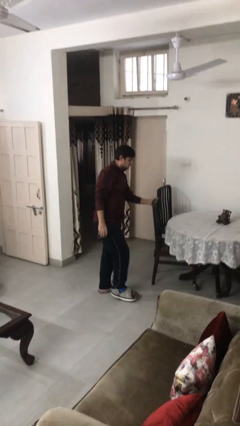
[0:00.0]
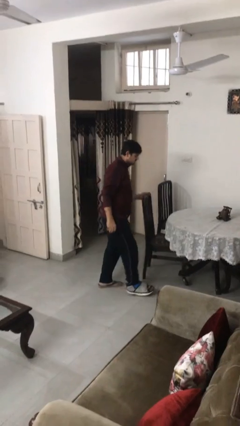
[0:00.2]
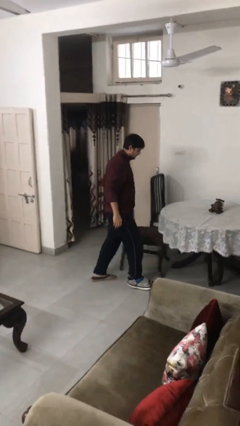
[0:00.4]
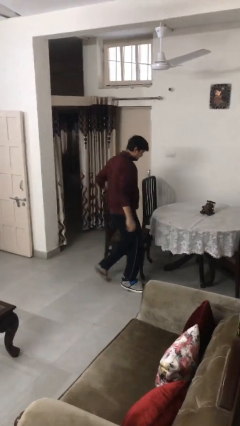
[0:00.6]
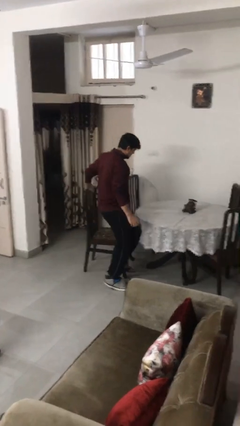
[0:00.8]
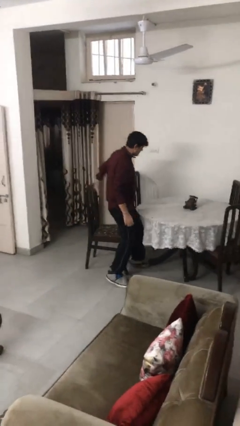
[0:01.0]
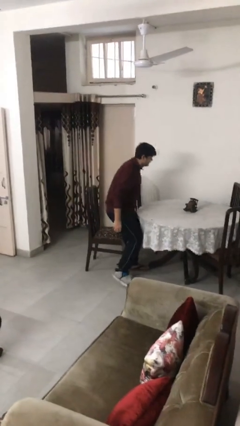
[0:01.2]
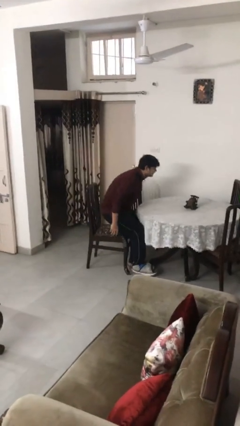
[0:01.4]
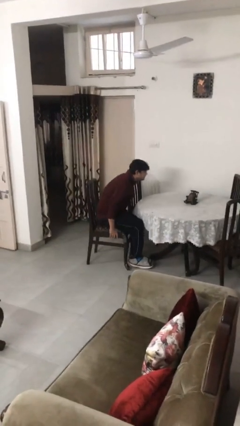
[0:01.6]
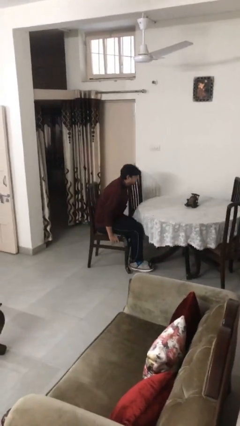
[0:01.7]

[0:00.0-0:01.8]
person sits down

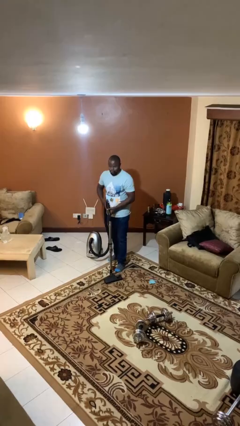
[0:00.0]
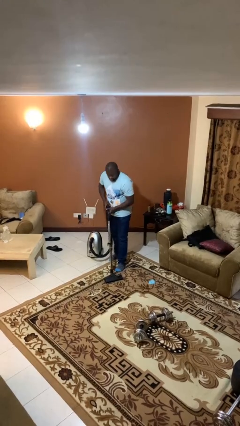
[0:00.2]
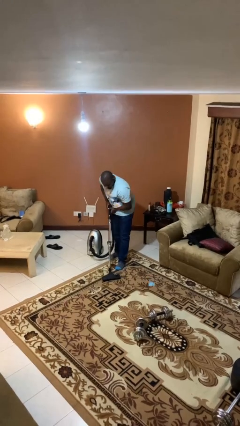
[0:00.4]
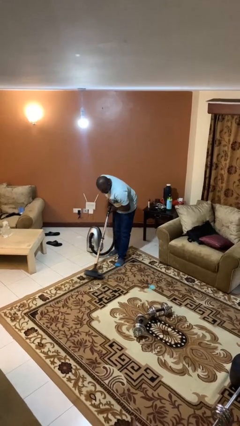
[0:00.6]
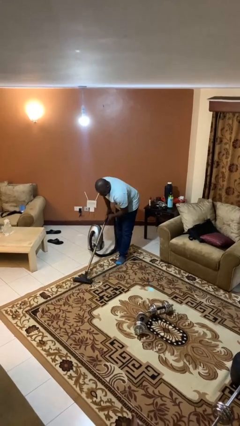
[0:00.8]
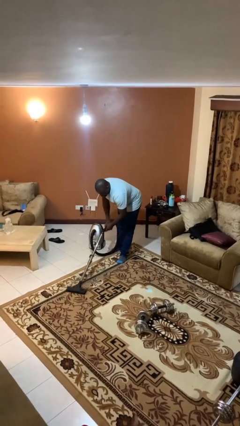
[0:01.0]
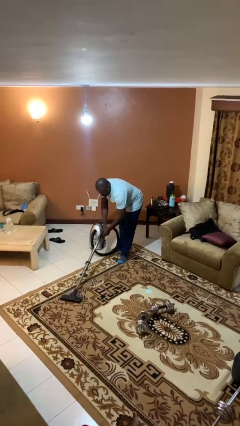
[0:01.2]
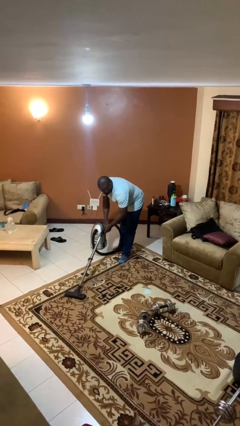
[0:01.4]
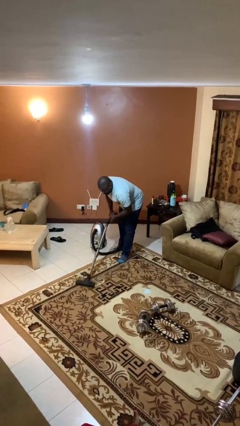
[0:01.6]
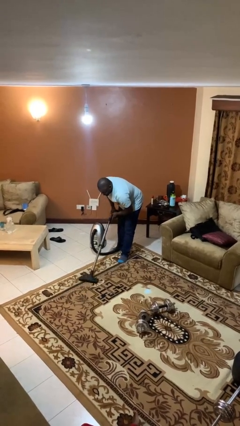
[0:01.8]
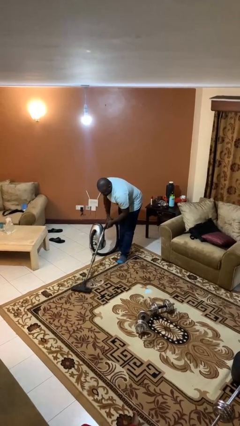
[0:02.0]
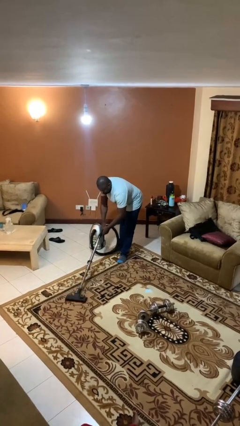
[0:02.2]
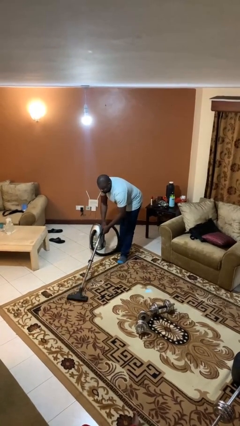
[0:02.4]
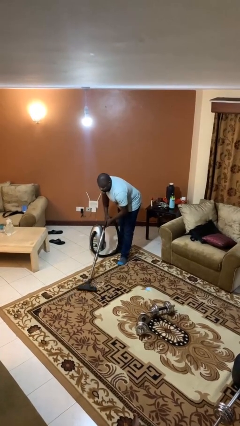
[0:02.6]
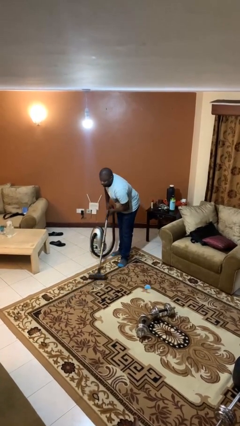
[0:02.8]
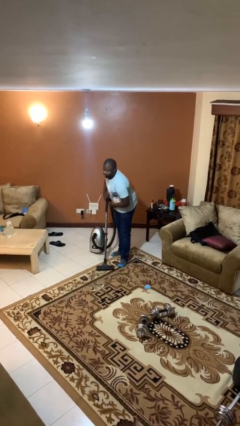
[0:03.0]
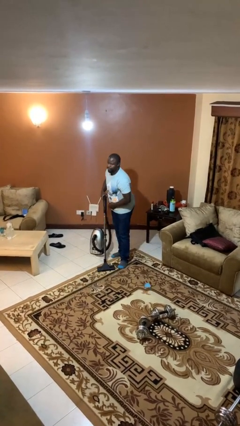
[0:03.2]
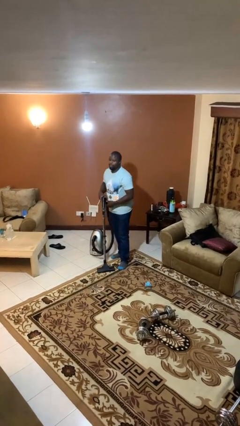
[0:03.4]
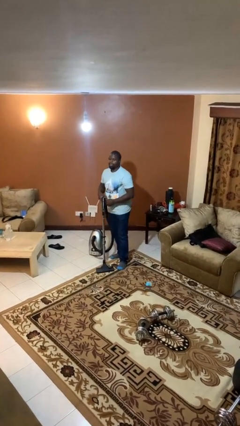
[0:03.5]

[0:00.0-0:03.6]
person vacuums carpet

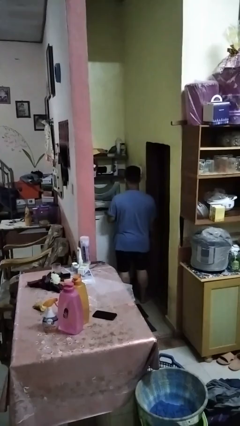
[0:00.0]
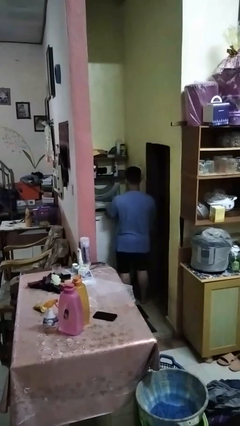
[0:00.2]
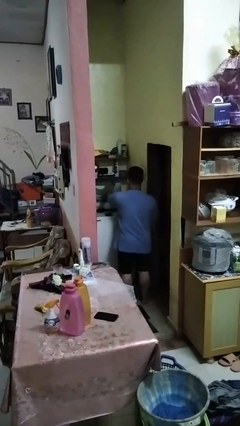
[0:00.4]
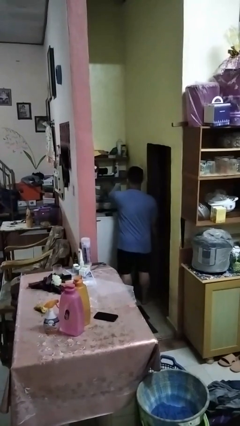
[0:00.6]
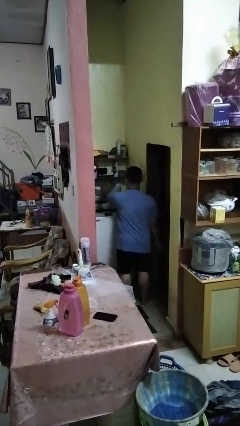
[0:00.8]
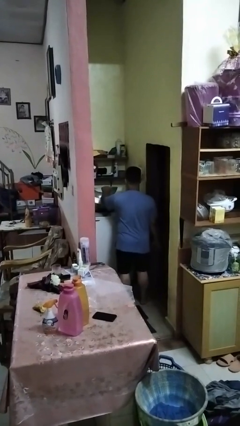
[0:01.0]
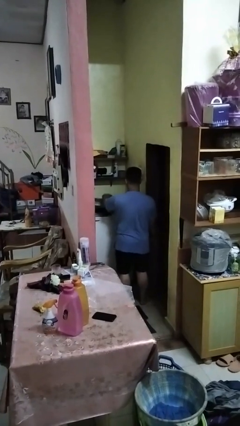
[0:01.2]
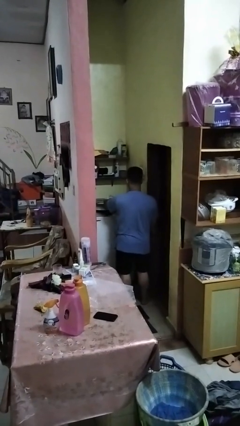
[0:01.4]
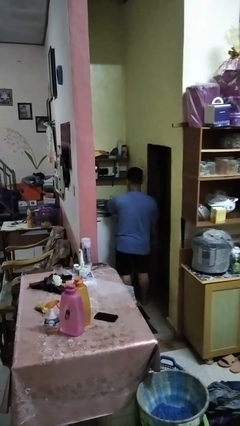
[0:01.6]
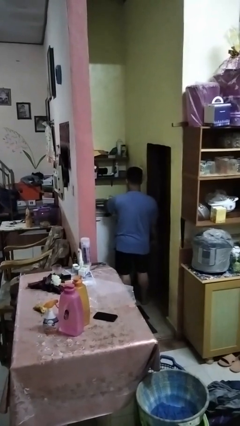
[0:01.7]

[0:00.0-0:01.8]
person closes clothes washer

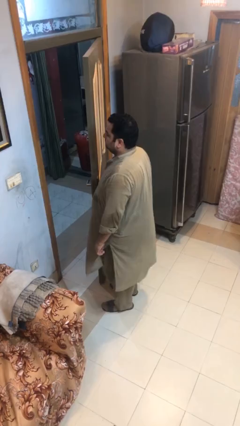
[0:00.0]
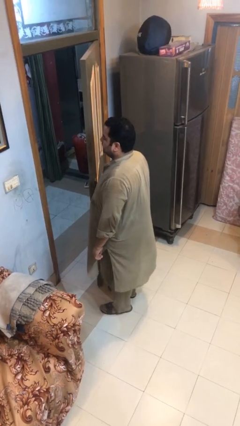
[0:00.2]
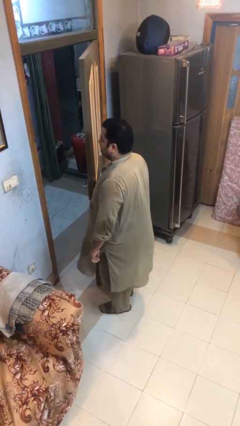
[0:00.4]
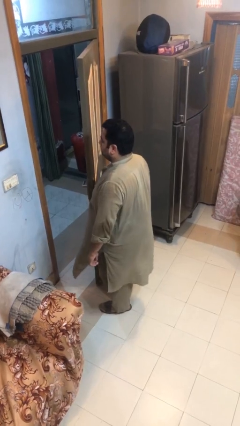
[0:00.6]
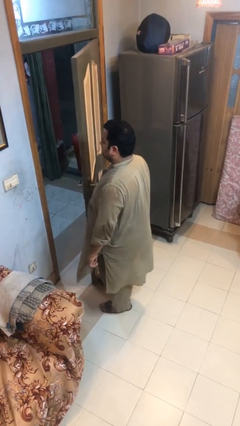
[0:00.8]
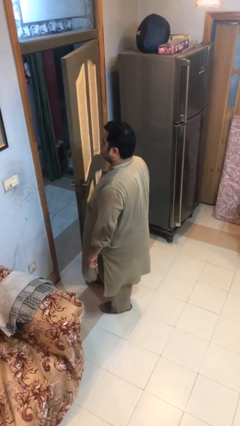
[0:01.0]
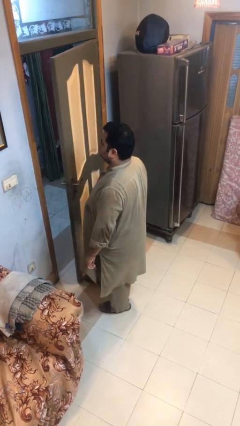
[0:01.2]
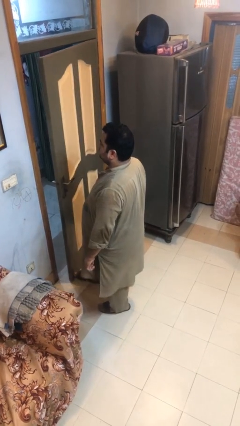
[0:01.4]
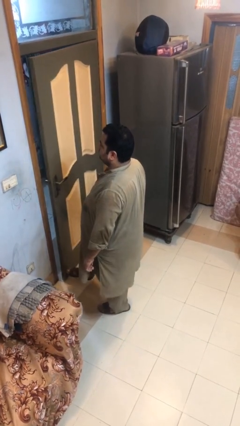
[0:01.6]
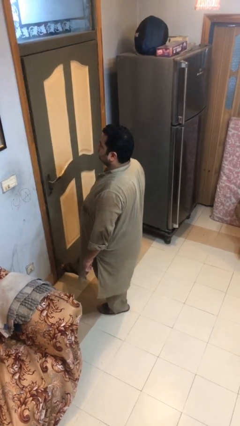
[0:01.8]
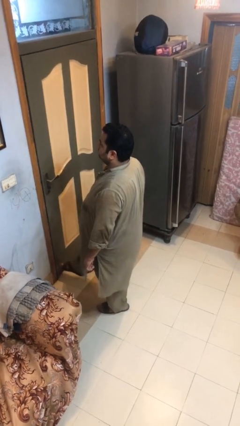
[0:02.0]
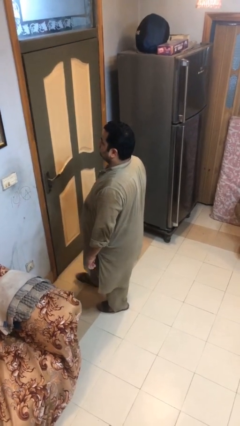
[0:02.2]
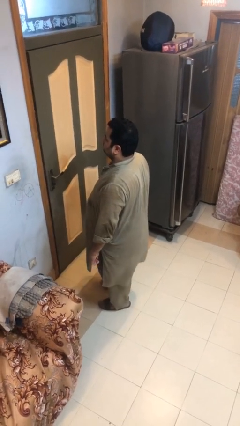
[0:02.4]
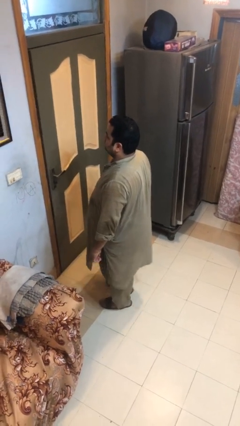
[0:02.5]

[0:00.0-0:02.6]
person closes door with foot

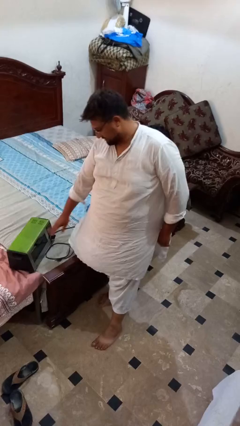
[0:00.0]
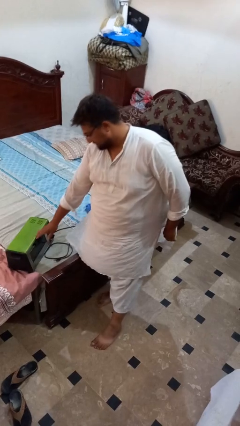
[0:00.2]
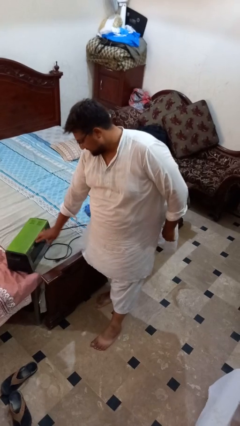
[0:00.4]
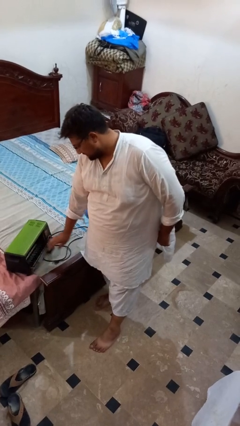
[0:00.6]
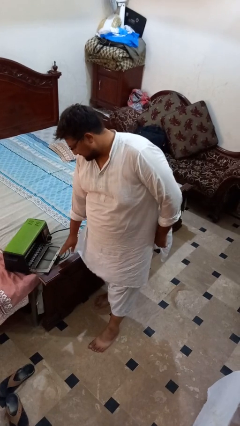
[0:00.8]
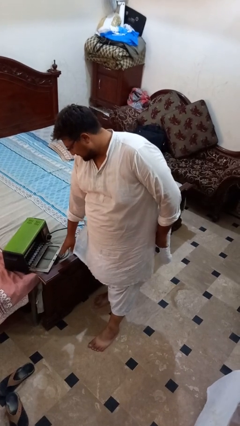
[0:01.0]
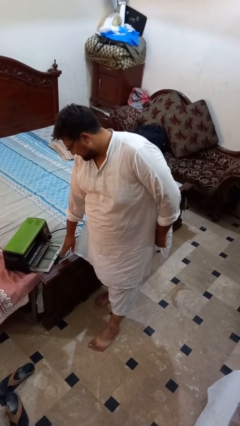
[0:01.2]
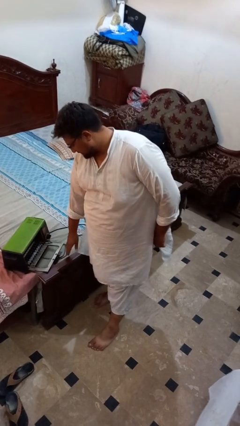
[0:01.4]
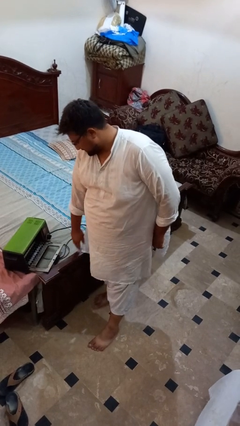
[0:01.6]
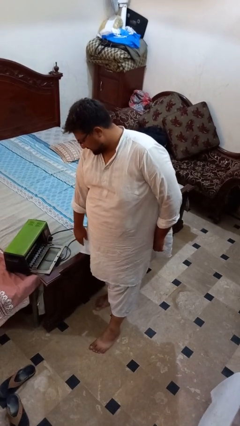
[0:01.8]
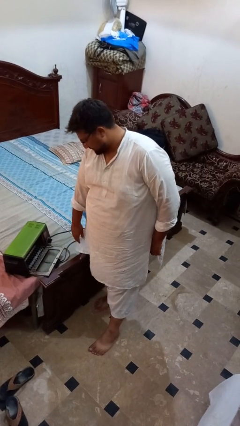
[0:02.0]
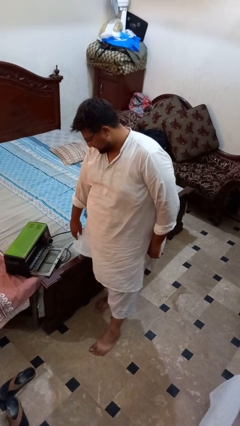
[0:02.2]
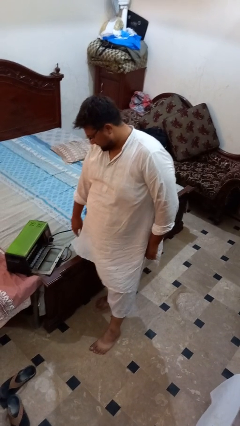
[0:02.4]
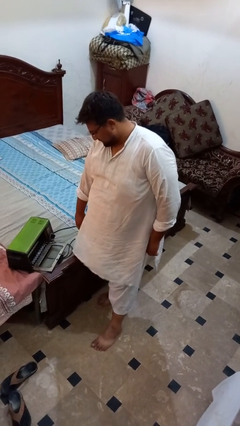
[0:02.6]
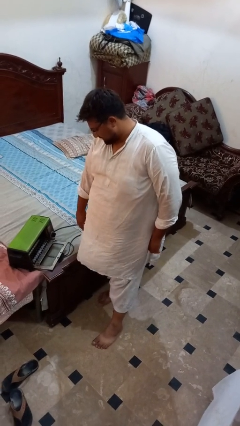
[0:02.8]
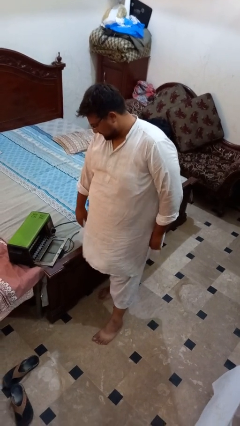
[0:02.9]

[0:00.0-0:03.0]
person opens oven door

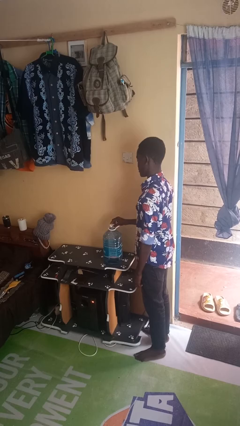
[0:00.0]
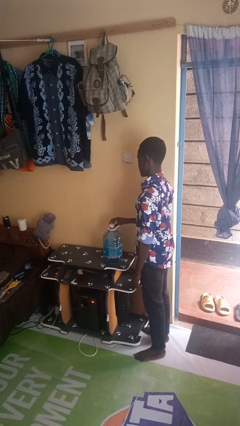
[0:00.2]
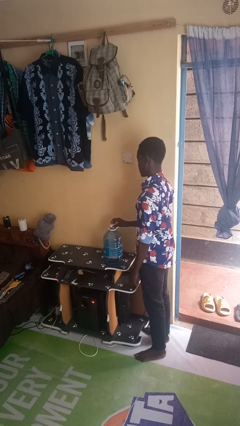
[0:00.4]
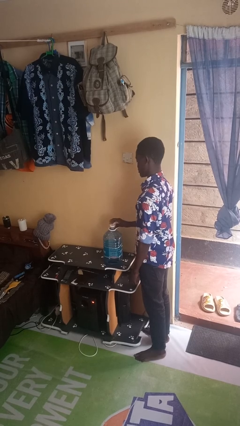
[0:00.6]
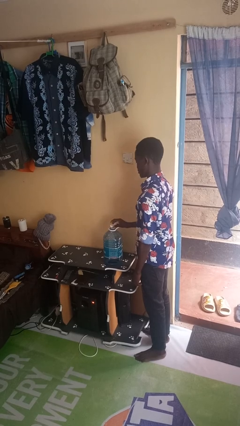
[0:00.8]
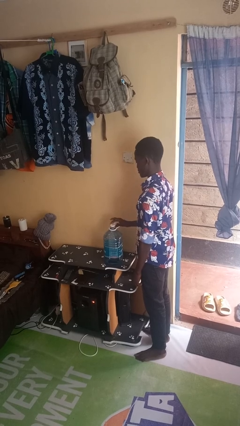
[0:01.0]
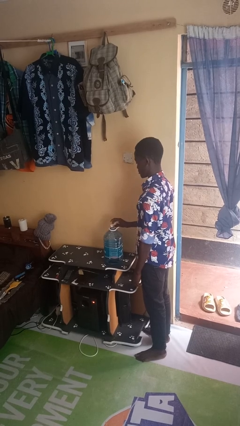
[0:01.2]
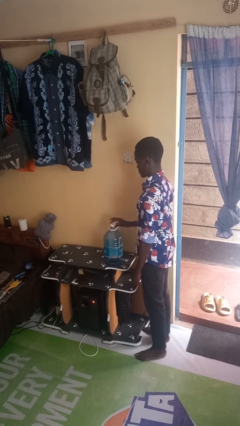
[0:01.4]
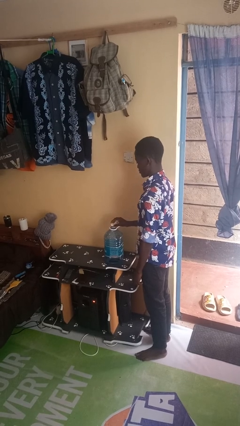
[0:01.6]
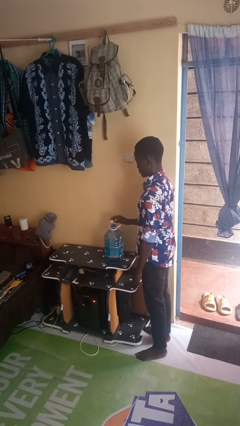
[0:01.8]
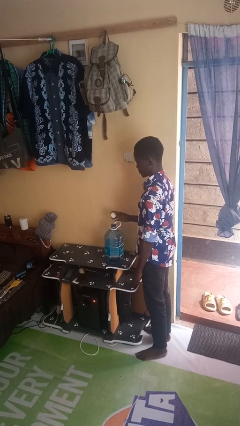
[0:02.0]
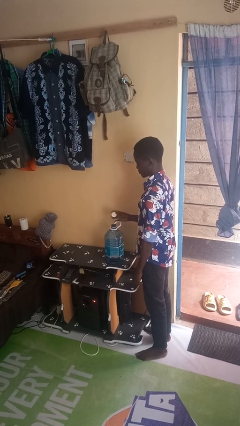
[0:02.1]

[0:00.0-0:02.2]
person unscrews lid from bottle

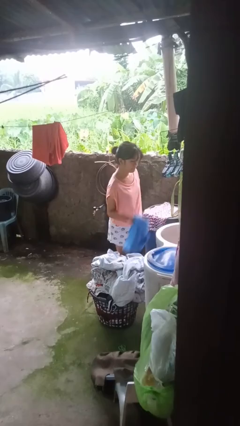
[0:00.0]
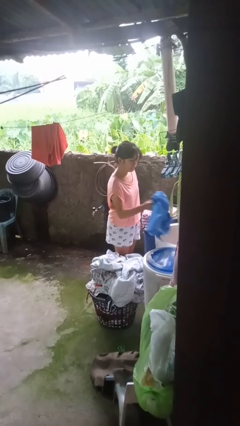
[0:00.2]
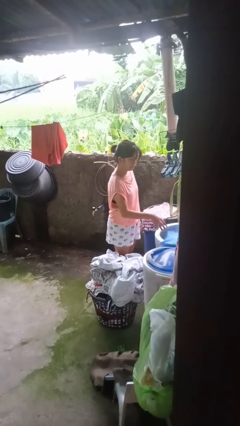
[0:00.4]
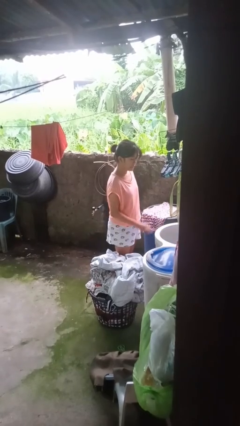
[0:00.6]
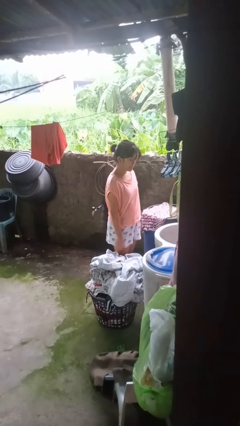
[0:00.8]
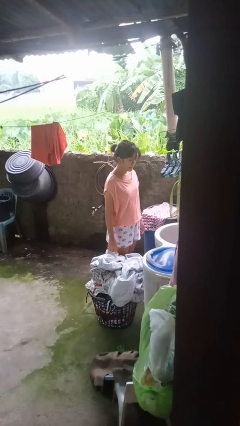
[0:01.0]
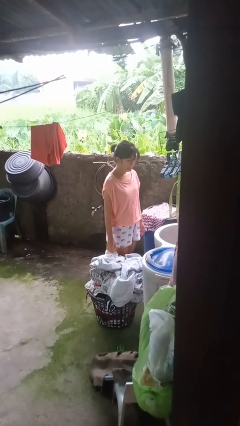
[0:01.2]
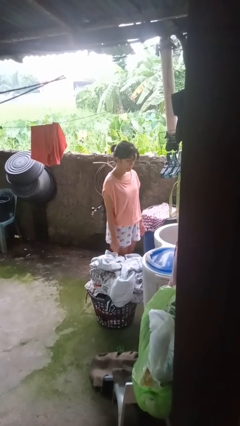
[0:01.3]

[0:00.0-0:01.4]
person loads clotheswasher

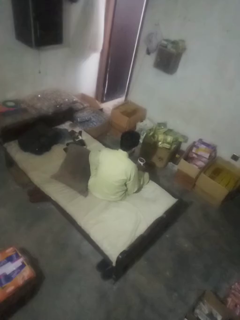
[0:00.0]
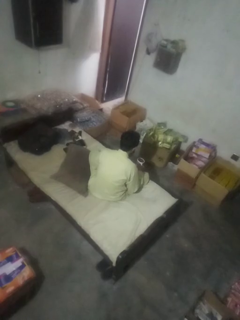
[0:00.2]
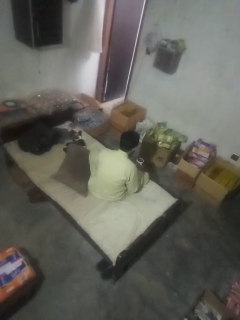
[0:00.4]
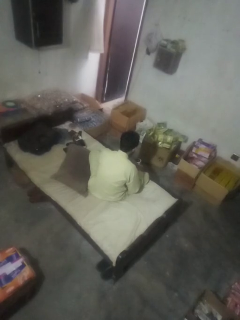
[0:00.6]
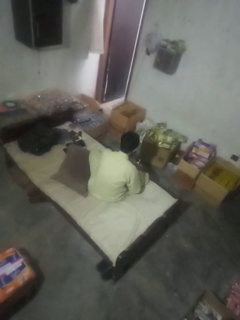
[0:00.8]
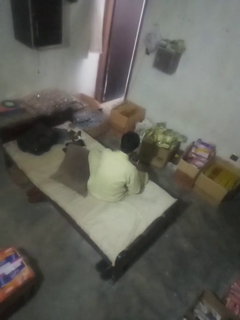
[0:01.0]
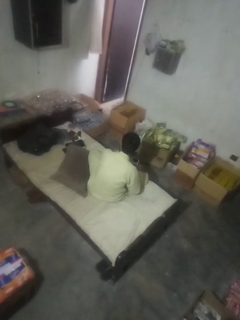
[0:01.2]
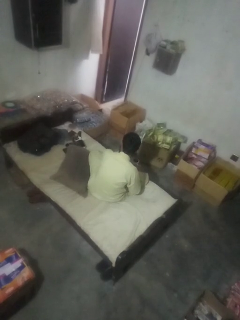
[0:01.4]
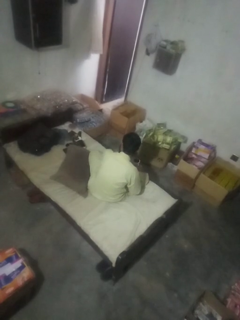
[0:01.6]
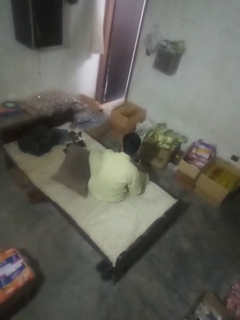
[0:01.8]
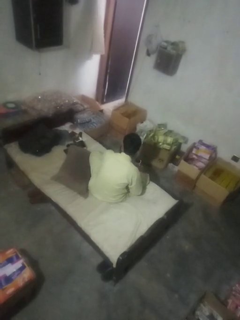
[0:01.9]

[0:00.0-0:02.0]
person stirs mug
